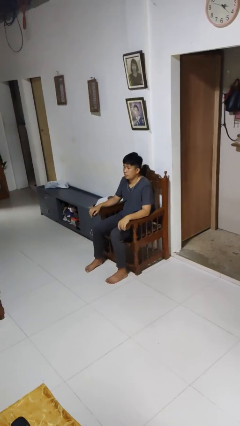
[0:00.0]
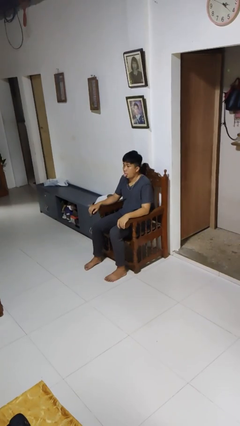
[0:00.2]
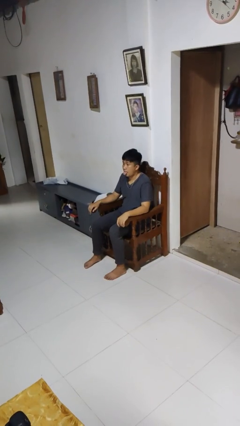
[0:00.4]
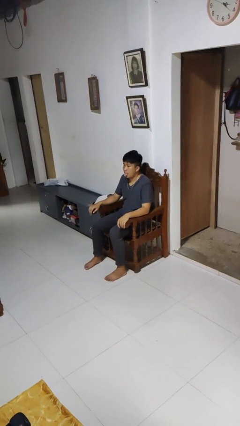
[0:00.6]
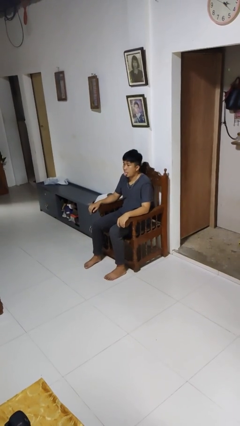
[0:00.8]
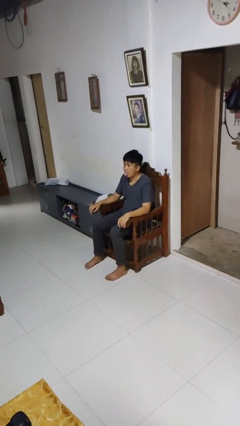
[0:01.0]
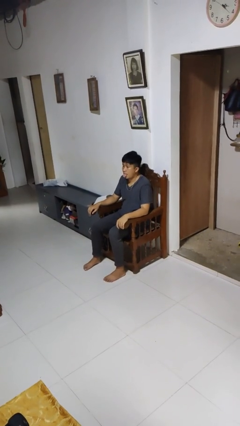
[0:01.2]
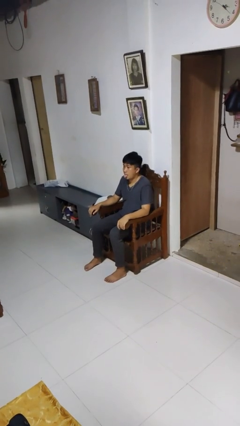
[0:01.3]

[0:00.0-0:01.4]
person sticks out tongue

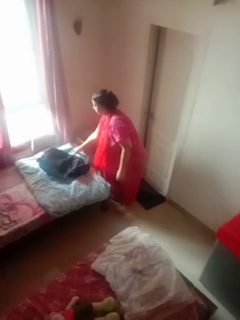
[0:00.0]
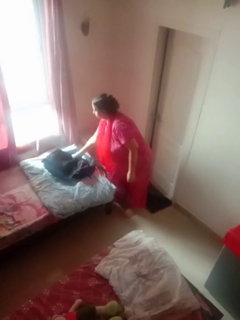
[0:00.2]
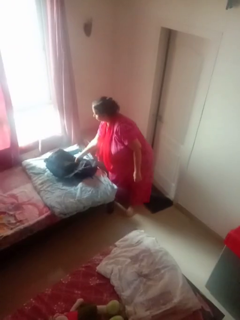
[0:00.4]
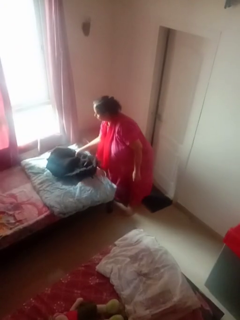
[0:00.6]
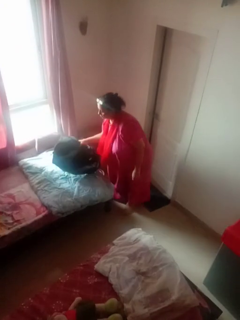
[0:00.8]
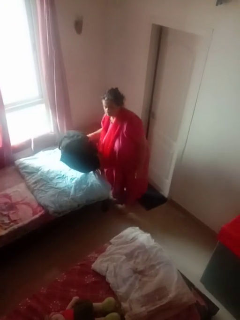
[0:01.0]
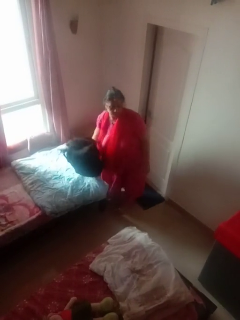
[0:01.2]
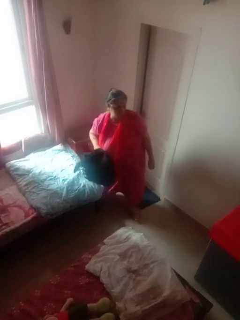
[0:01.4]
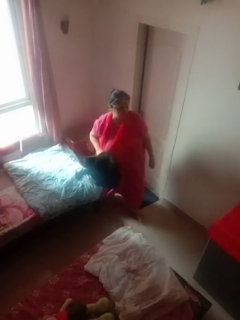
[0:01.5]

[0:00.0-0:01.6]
person picks up object from bed

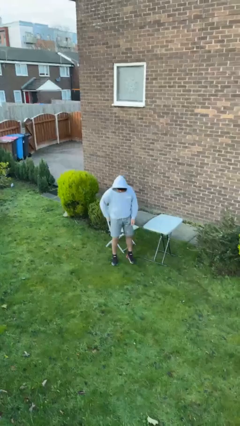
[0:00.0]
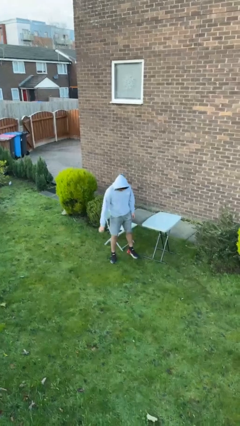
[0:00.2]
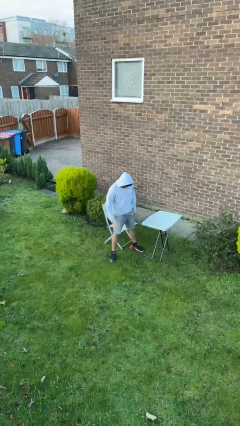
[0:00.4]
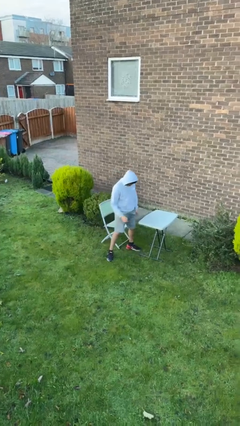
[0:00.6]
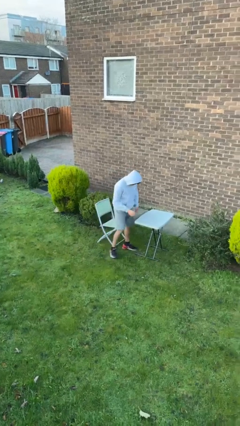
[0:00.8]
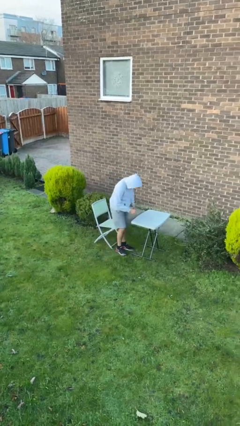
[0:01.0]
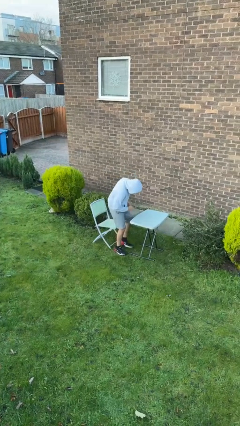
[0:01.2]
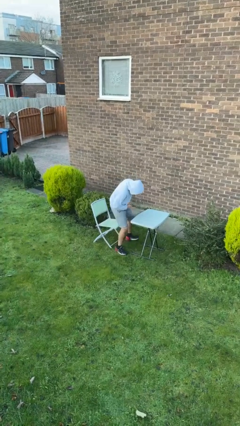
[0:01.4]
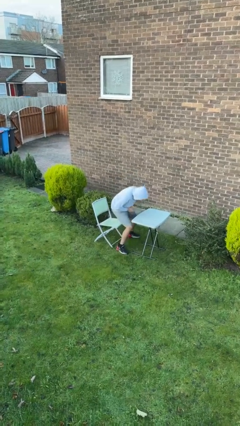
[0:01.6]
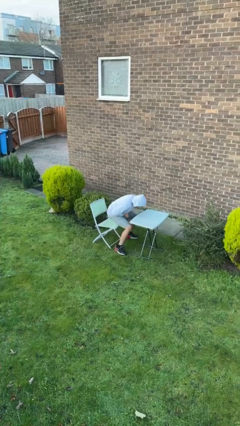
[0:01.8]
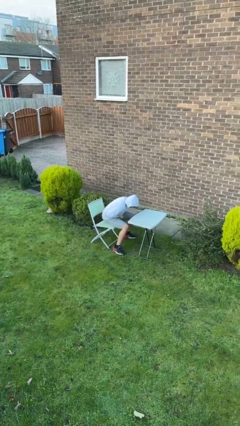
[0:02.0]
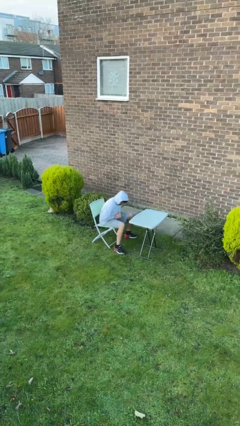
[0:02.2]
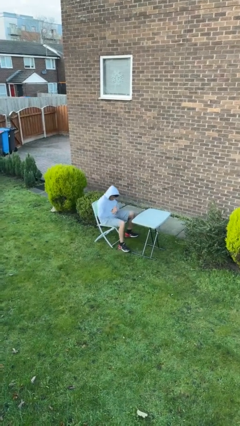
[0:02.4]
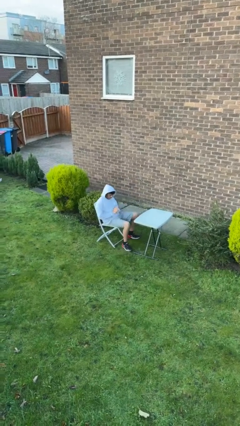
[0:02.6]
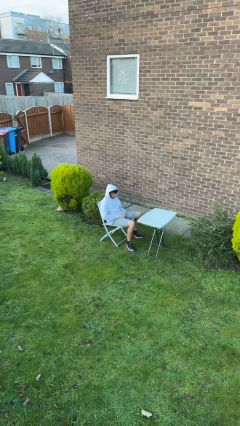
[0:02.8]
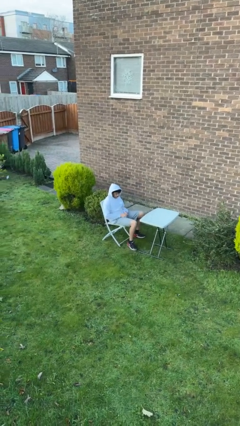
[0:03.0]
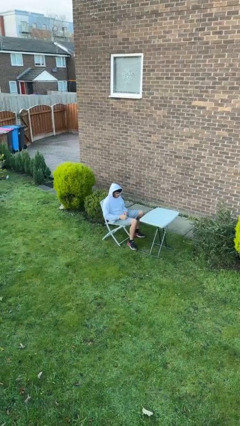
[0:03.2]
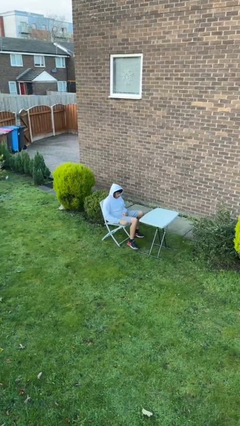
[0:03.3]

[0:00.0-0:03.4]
person sits down

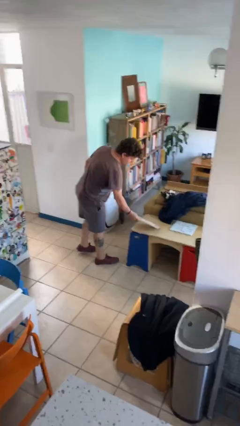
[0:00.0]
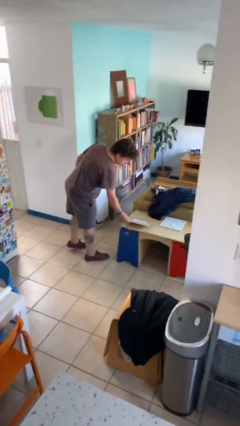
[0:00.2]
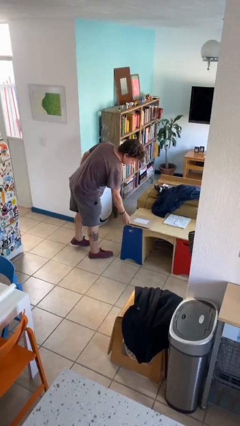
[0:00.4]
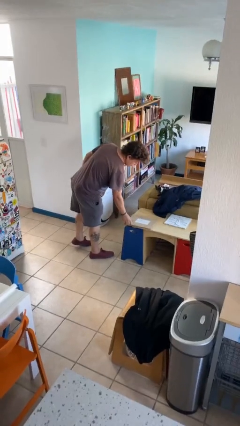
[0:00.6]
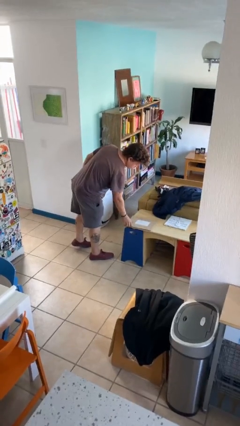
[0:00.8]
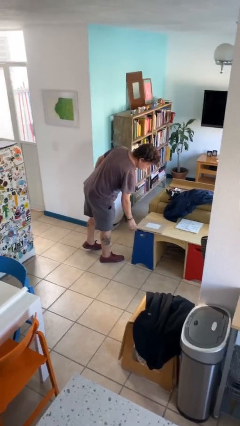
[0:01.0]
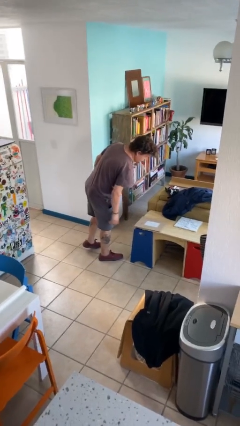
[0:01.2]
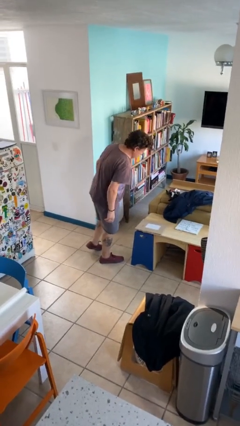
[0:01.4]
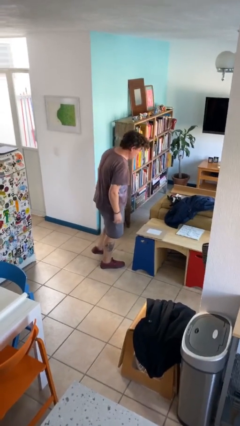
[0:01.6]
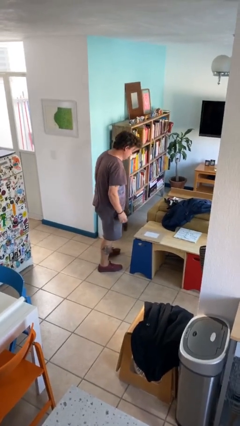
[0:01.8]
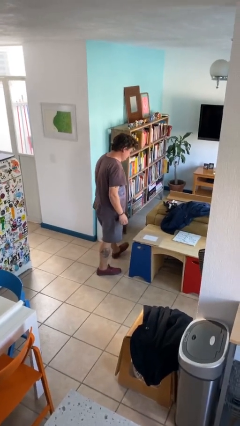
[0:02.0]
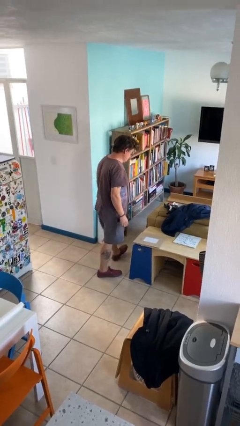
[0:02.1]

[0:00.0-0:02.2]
person puts down object on table

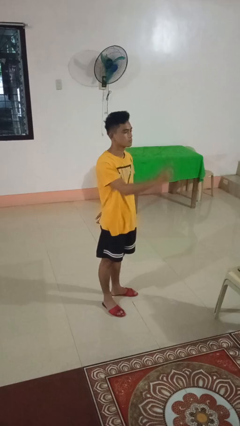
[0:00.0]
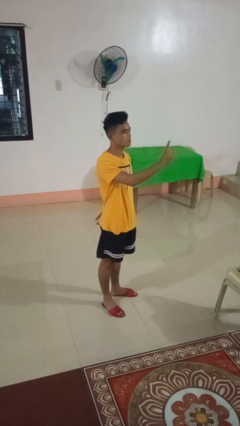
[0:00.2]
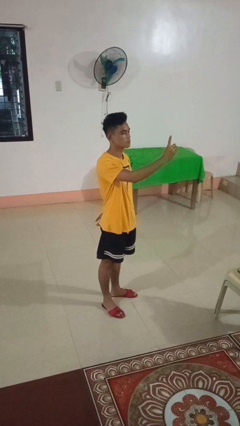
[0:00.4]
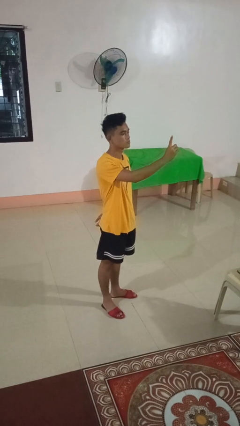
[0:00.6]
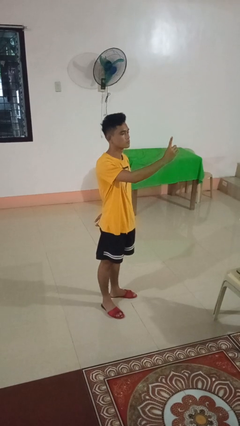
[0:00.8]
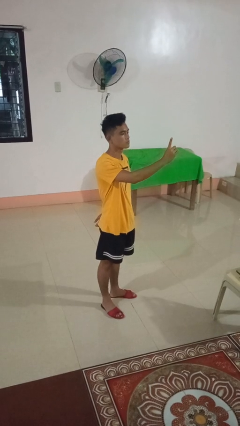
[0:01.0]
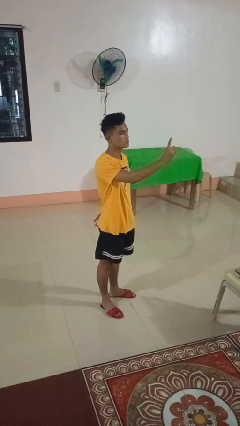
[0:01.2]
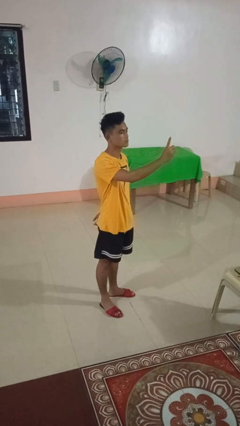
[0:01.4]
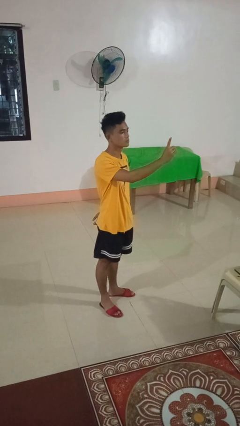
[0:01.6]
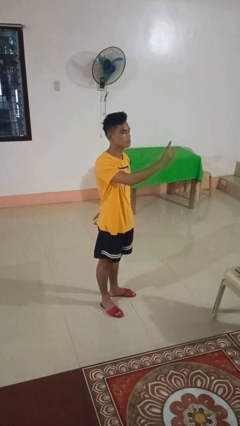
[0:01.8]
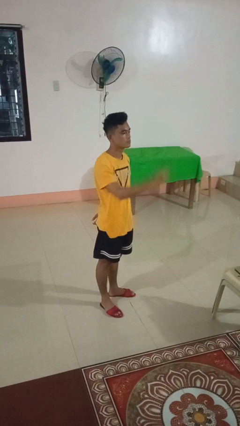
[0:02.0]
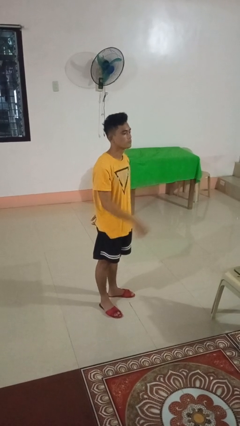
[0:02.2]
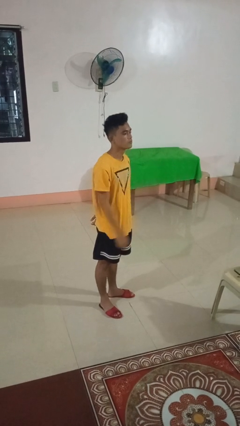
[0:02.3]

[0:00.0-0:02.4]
person gestures number one

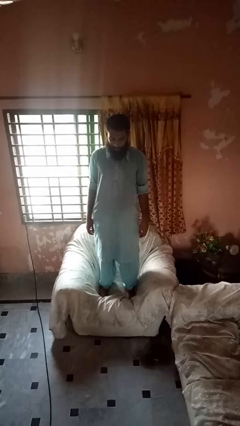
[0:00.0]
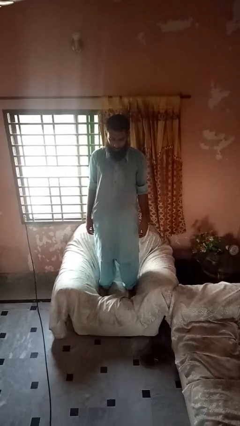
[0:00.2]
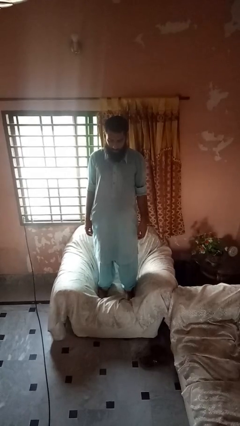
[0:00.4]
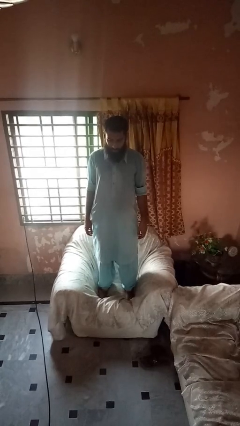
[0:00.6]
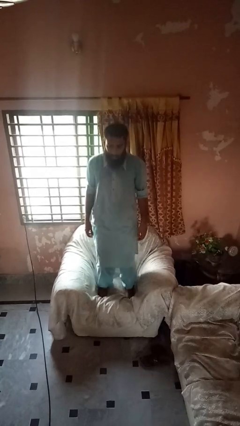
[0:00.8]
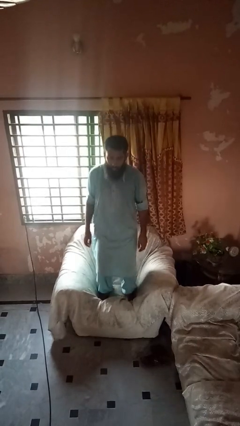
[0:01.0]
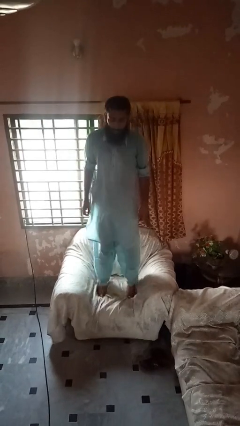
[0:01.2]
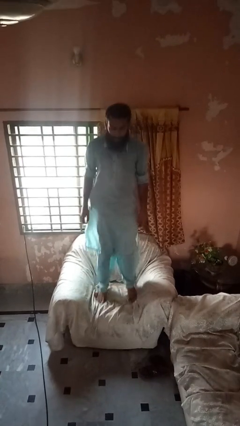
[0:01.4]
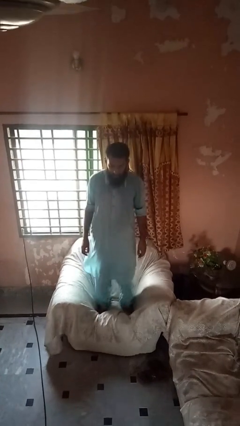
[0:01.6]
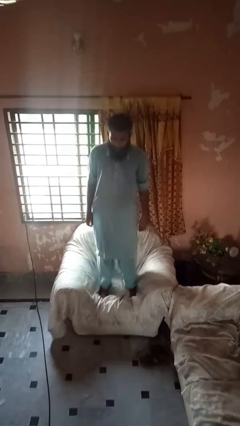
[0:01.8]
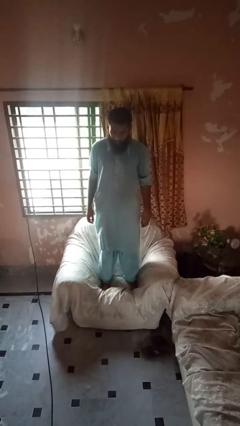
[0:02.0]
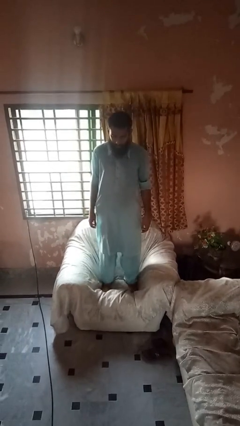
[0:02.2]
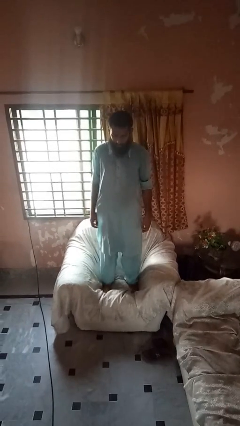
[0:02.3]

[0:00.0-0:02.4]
person jumps on couch

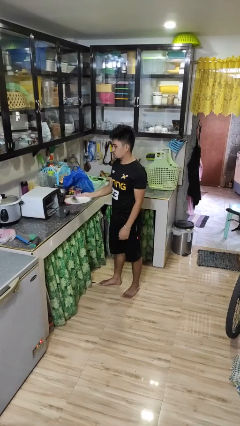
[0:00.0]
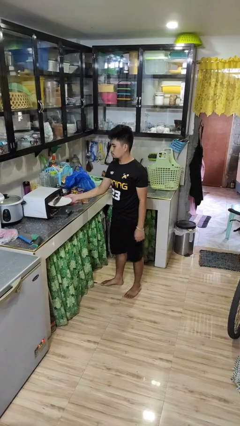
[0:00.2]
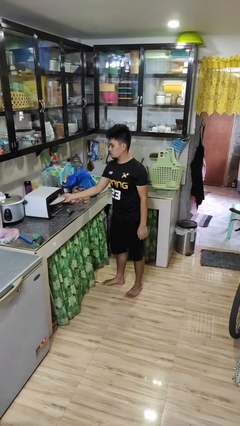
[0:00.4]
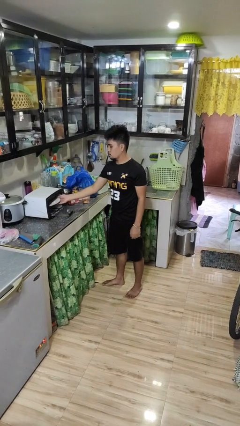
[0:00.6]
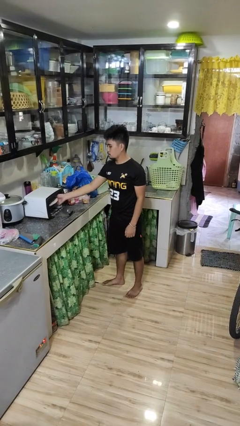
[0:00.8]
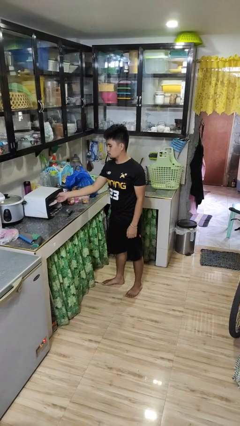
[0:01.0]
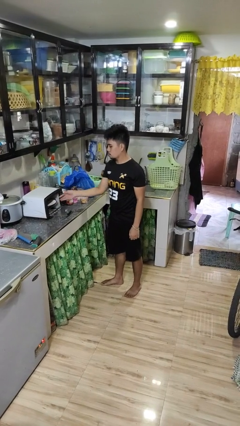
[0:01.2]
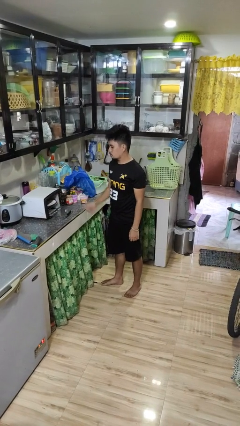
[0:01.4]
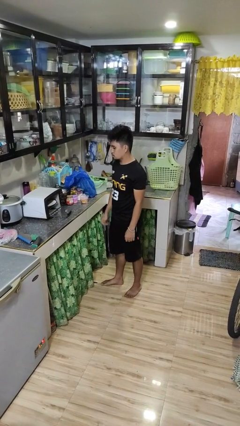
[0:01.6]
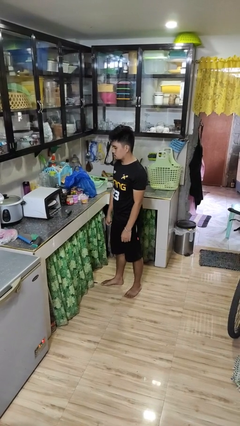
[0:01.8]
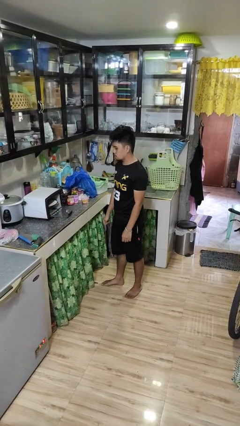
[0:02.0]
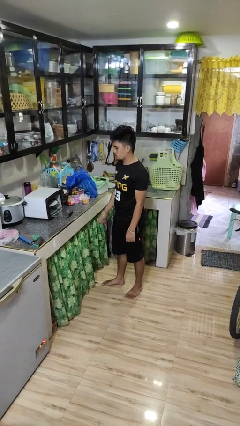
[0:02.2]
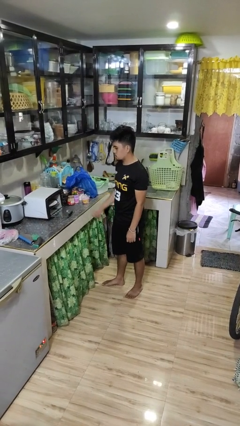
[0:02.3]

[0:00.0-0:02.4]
person puts object into microwave

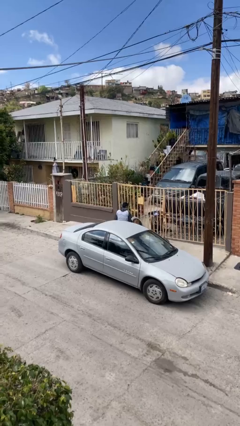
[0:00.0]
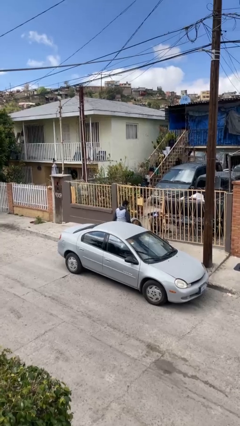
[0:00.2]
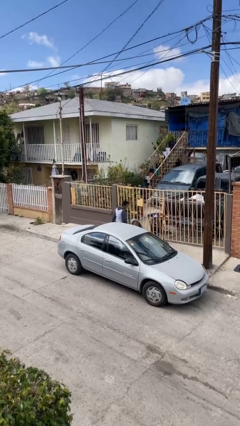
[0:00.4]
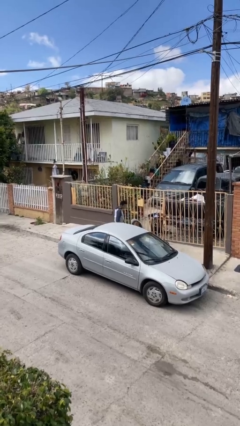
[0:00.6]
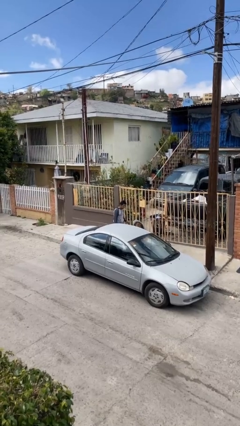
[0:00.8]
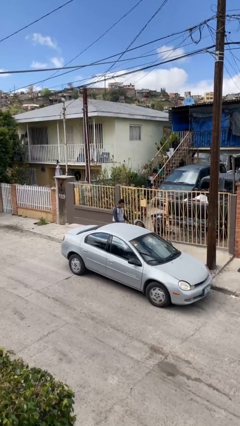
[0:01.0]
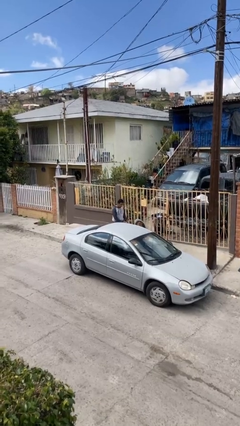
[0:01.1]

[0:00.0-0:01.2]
person exits car

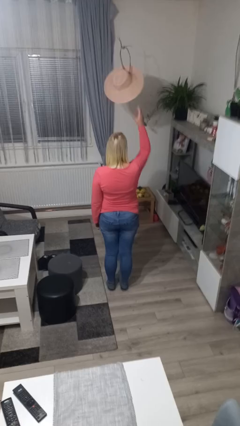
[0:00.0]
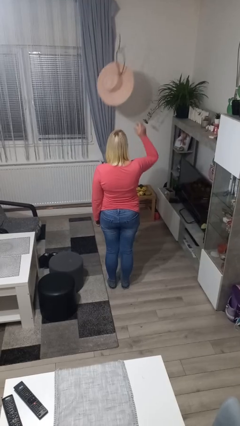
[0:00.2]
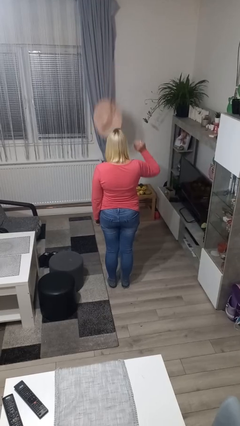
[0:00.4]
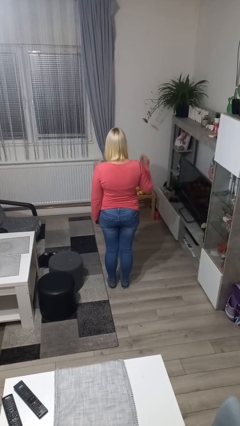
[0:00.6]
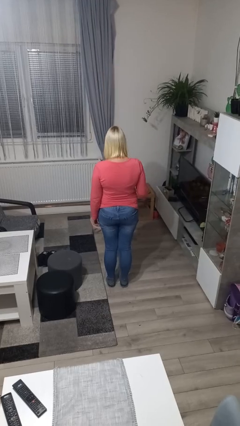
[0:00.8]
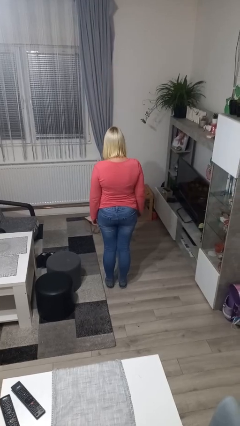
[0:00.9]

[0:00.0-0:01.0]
person throws object into air
